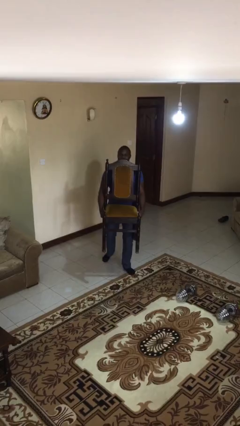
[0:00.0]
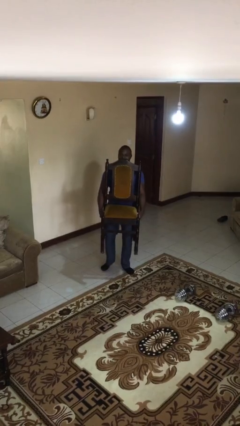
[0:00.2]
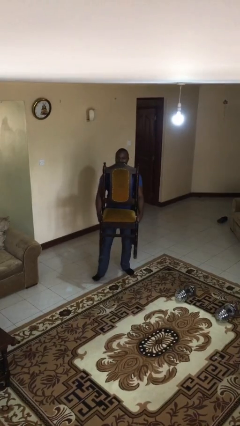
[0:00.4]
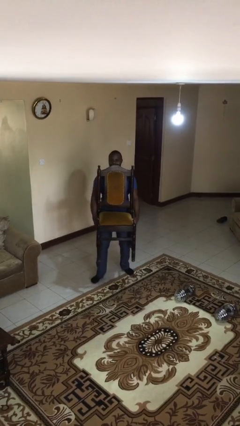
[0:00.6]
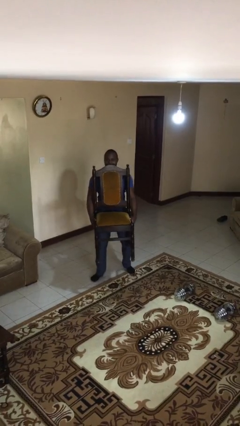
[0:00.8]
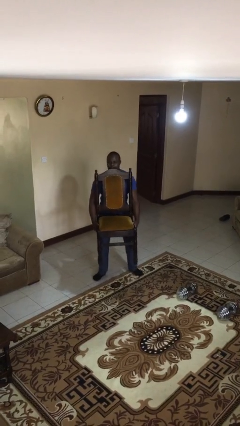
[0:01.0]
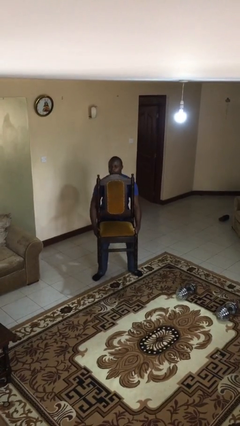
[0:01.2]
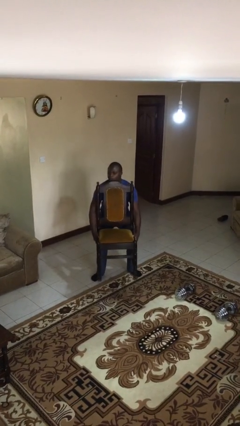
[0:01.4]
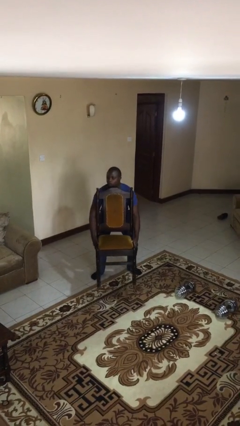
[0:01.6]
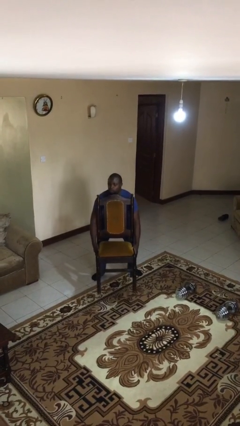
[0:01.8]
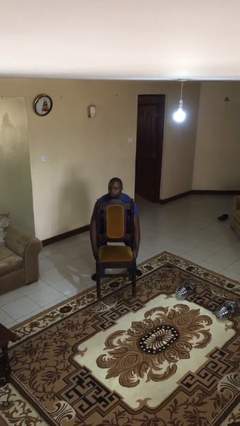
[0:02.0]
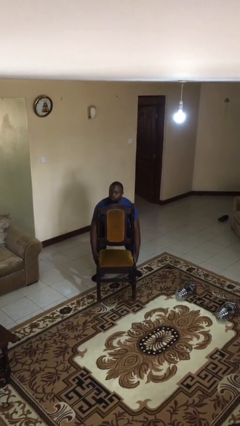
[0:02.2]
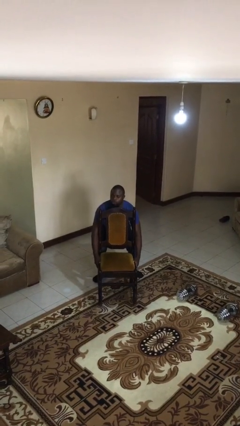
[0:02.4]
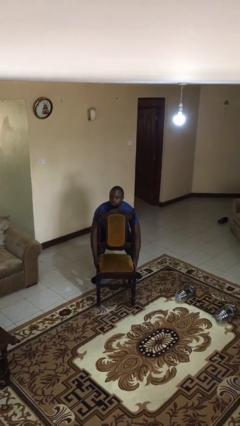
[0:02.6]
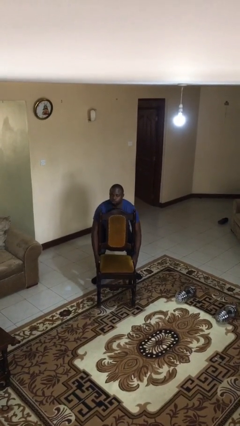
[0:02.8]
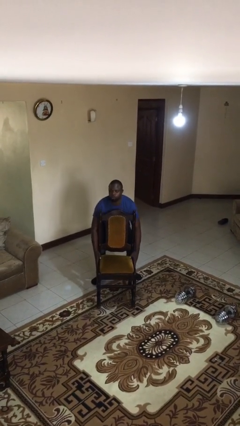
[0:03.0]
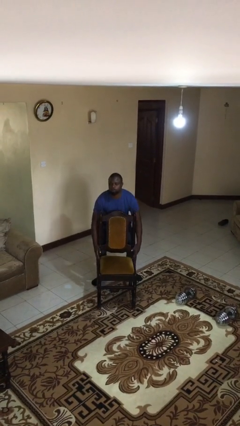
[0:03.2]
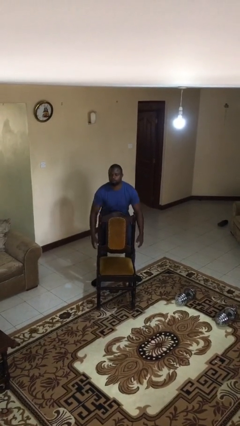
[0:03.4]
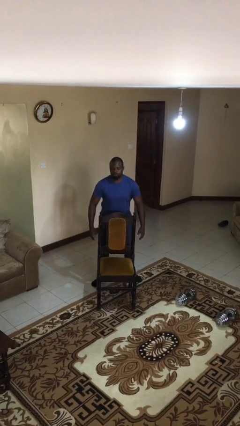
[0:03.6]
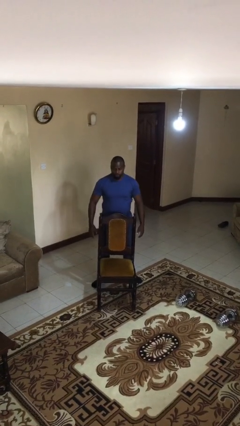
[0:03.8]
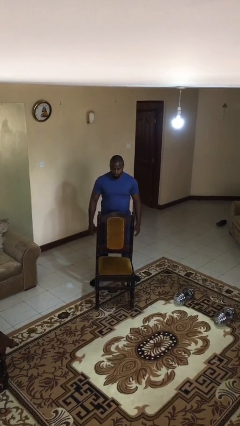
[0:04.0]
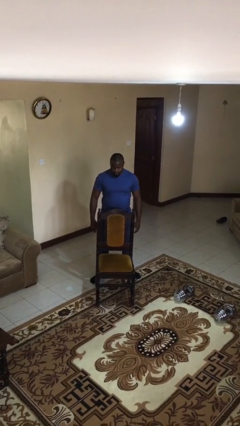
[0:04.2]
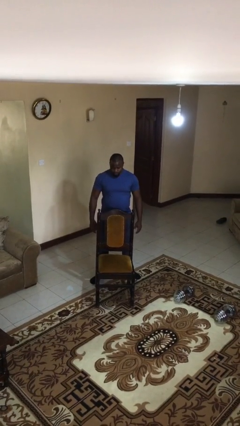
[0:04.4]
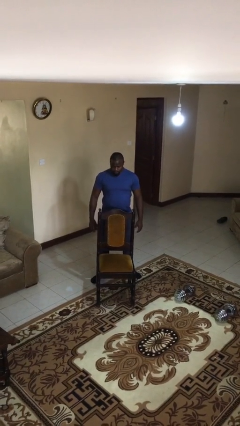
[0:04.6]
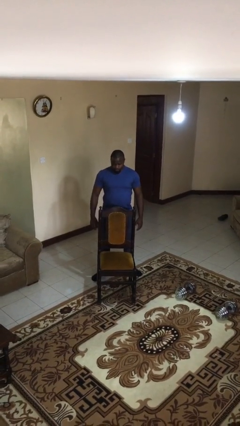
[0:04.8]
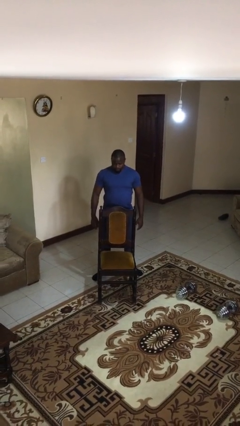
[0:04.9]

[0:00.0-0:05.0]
person puts down object on floor

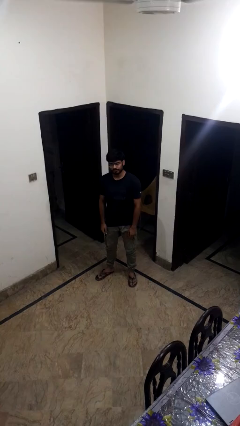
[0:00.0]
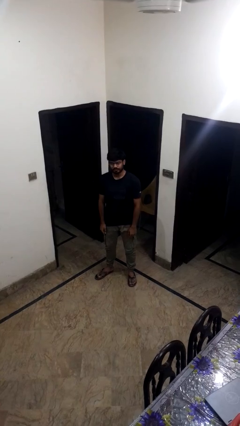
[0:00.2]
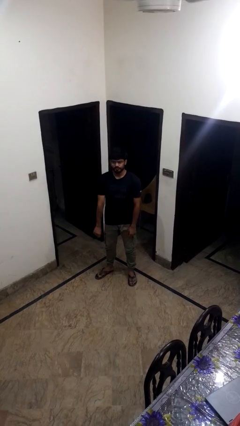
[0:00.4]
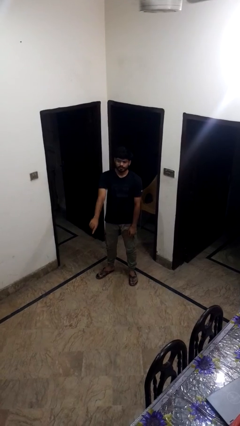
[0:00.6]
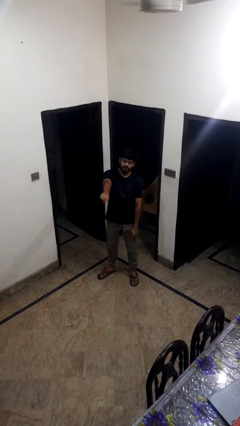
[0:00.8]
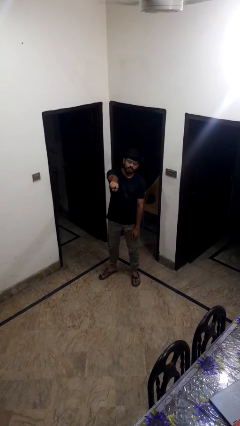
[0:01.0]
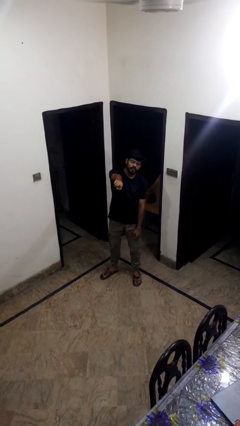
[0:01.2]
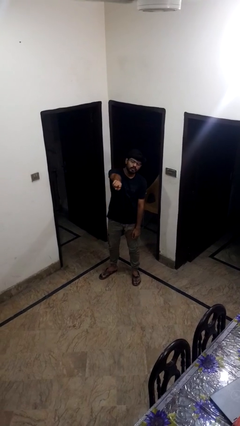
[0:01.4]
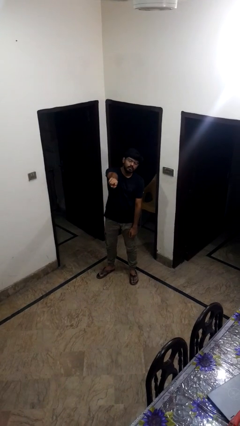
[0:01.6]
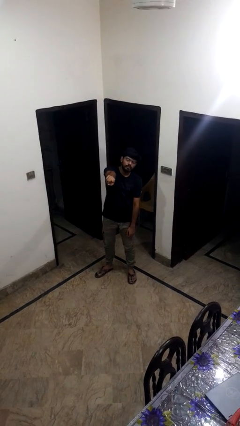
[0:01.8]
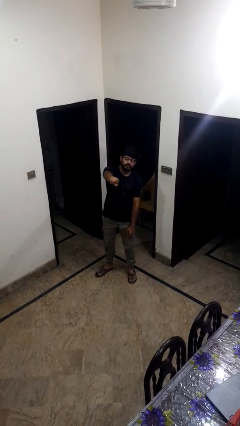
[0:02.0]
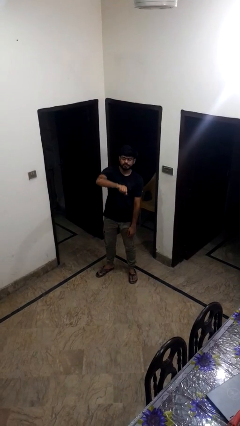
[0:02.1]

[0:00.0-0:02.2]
person points at person

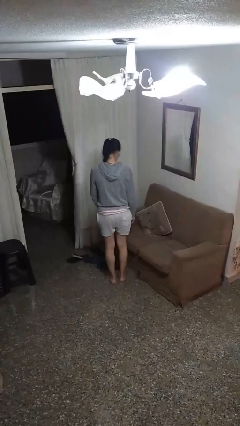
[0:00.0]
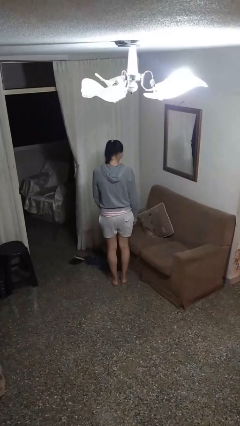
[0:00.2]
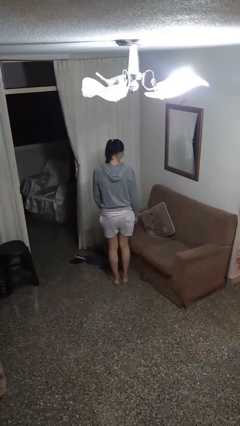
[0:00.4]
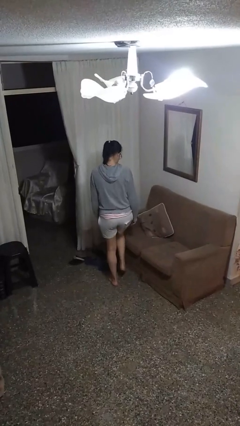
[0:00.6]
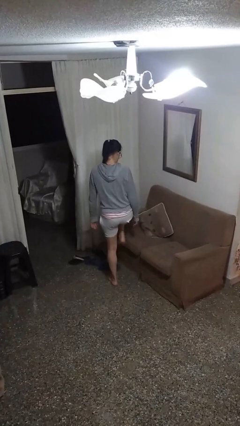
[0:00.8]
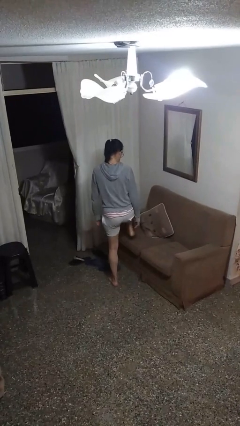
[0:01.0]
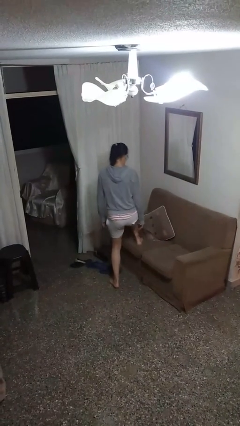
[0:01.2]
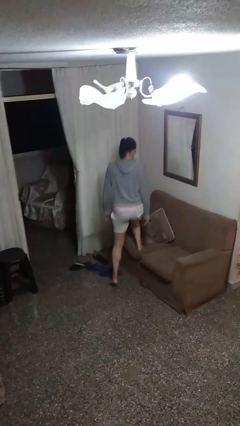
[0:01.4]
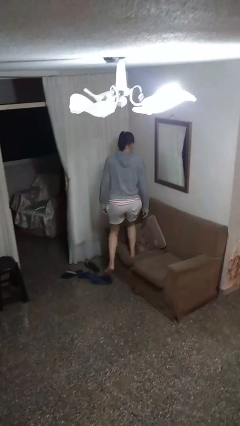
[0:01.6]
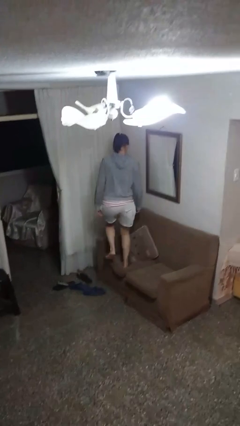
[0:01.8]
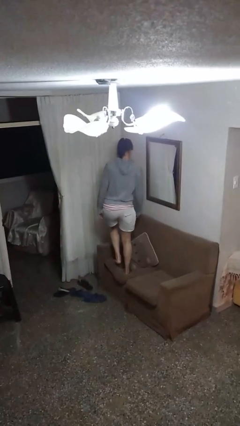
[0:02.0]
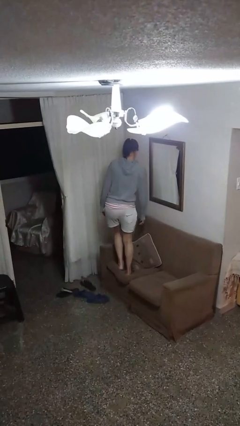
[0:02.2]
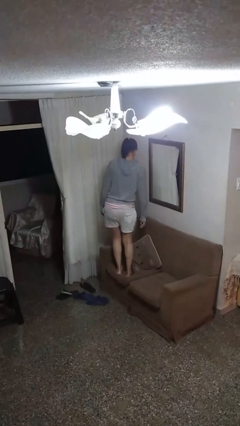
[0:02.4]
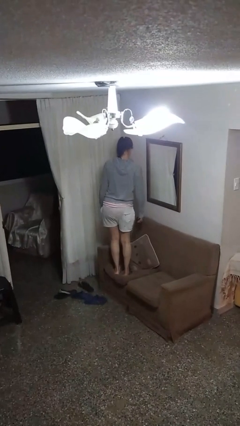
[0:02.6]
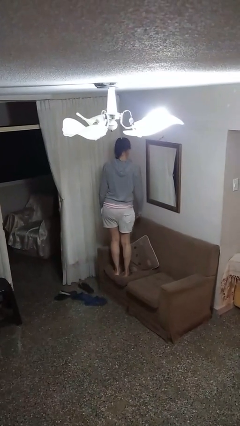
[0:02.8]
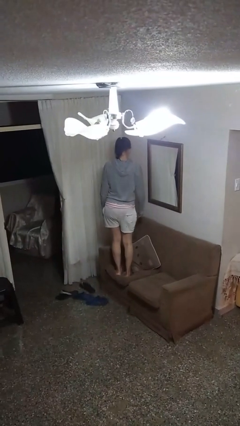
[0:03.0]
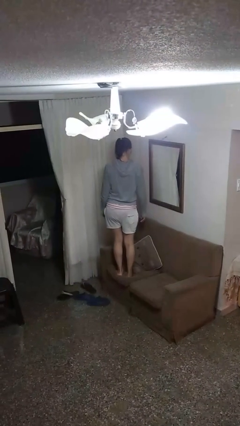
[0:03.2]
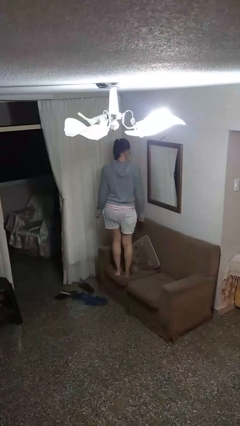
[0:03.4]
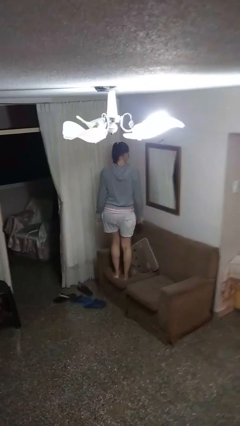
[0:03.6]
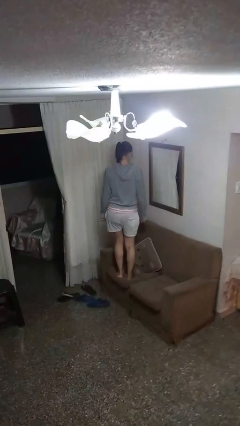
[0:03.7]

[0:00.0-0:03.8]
person climbs on couch

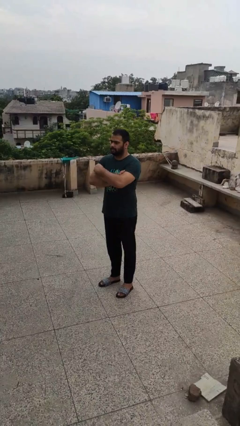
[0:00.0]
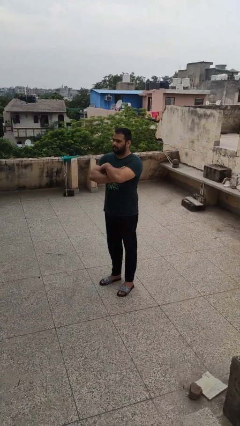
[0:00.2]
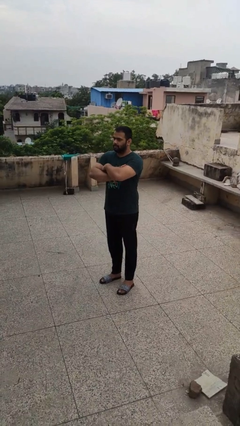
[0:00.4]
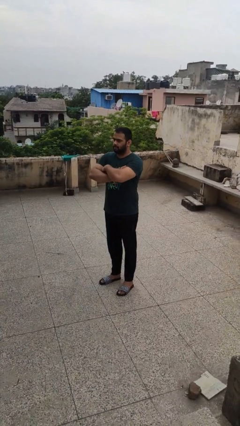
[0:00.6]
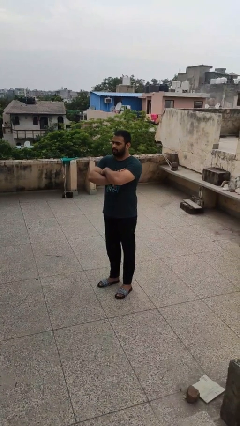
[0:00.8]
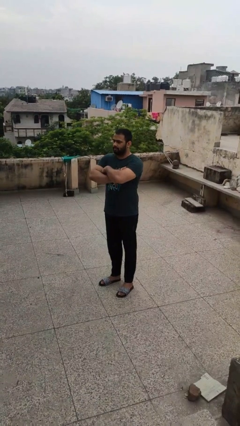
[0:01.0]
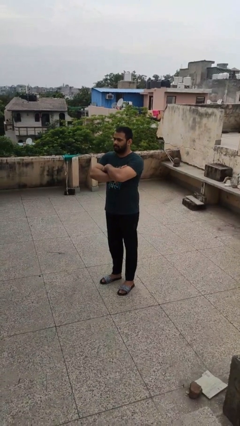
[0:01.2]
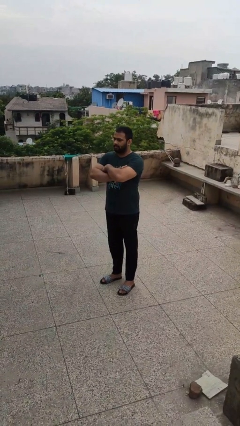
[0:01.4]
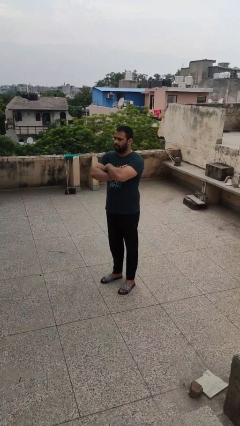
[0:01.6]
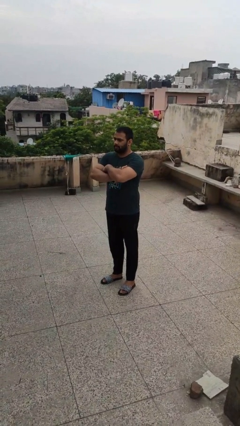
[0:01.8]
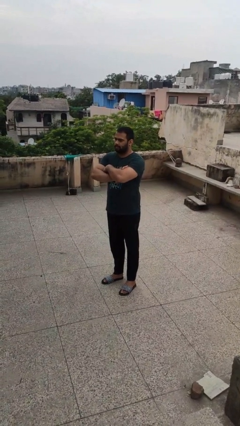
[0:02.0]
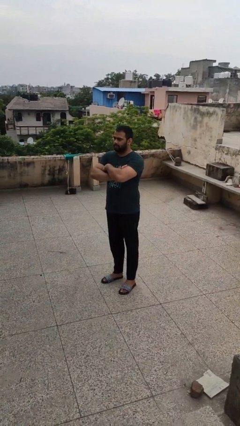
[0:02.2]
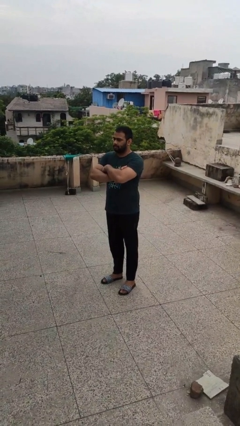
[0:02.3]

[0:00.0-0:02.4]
person crosses arms

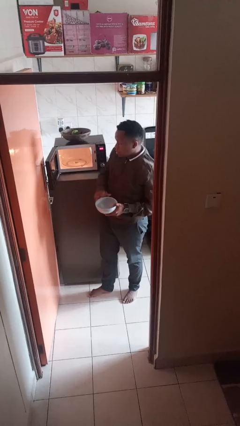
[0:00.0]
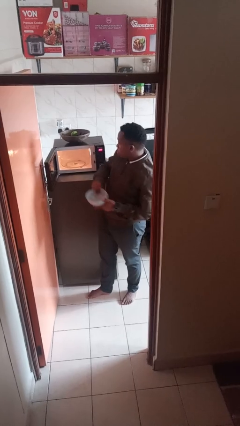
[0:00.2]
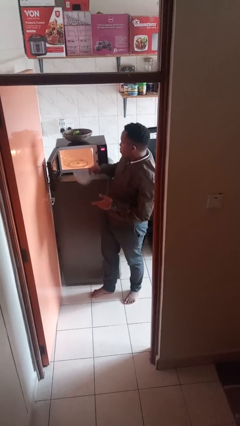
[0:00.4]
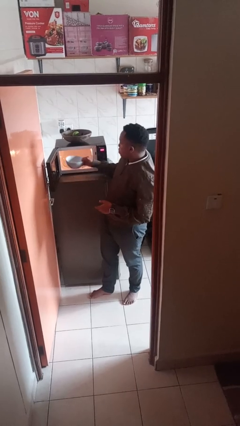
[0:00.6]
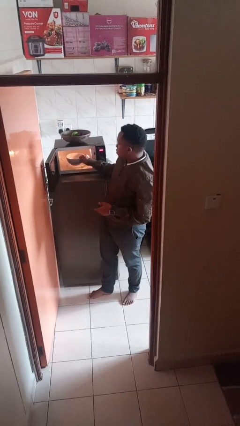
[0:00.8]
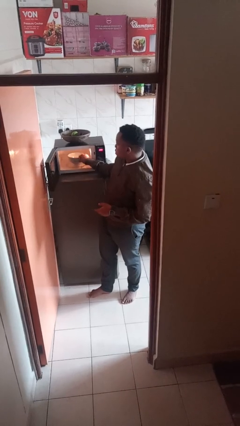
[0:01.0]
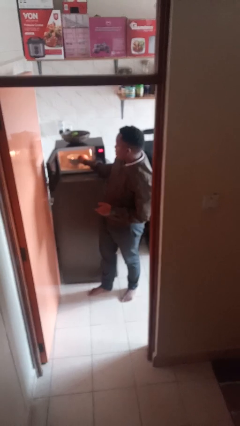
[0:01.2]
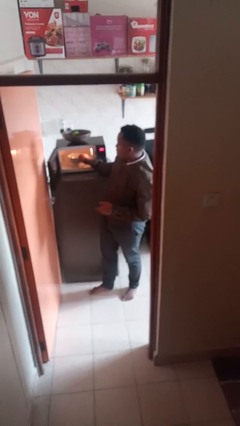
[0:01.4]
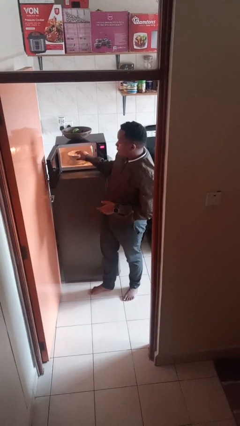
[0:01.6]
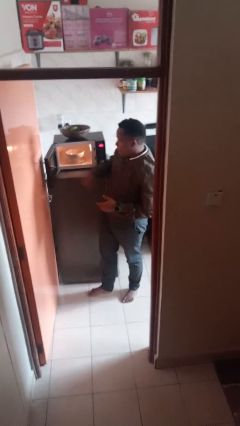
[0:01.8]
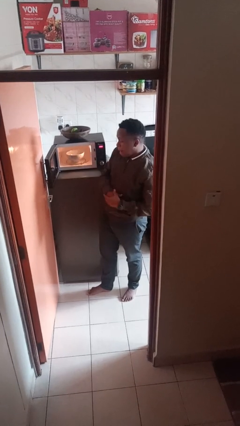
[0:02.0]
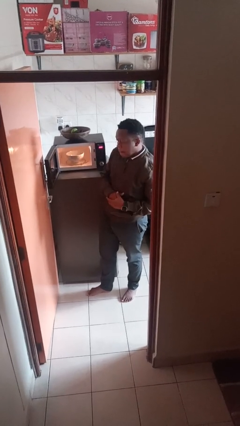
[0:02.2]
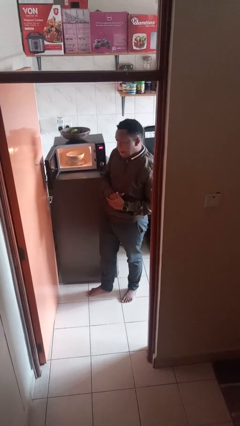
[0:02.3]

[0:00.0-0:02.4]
person puts object into microwave

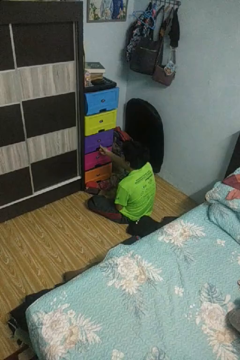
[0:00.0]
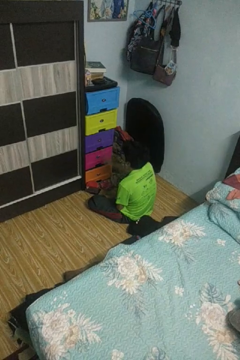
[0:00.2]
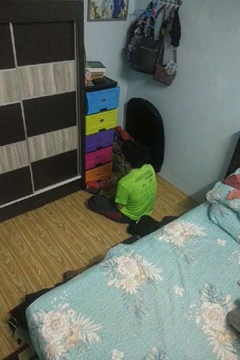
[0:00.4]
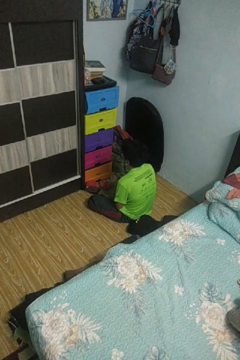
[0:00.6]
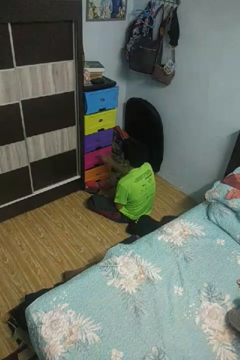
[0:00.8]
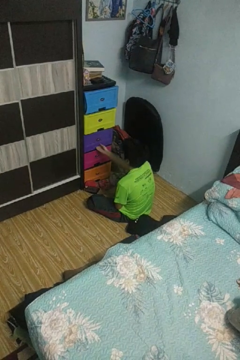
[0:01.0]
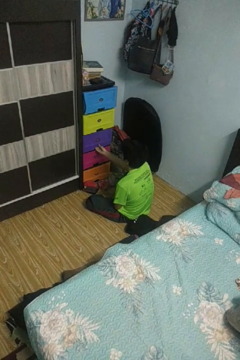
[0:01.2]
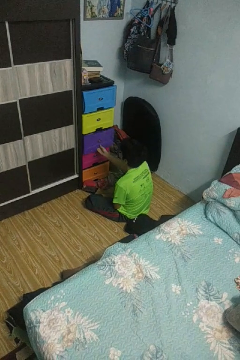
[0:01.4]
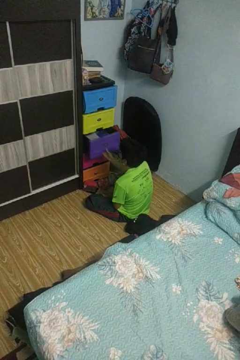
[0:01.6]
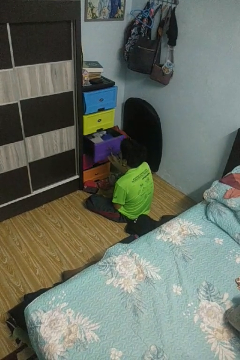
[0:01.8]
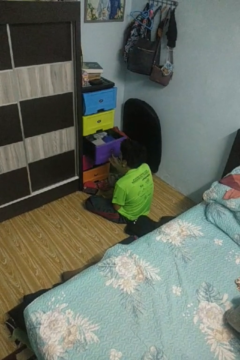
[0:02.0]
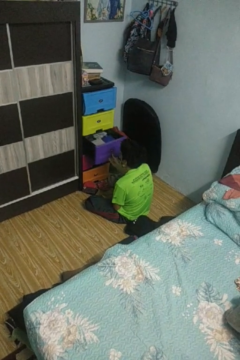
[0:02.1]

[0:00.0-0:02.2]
person opens dresser drawer
